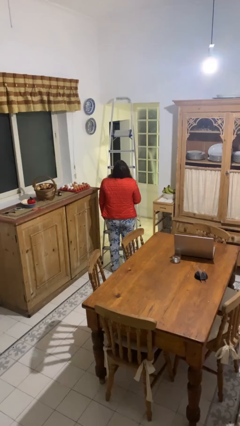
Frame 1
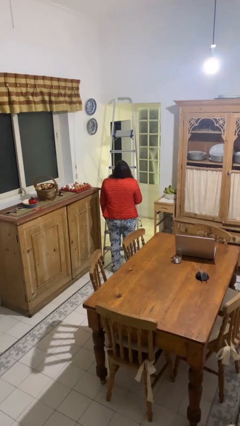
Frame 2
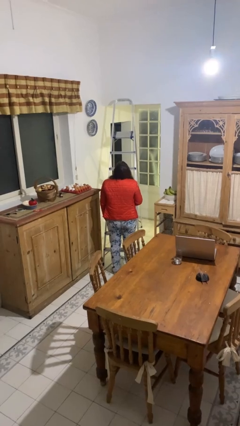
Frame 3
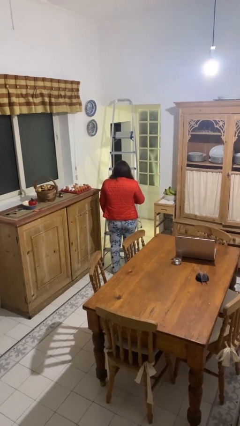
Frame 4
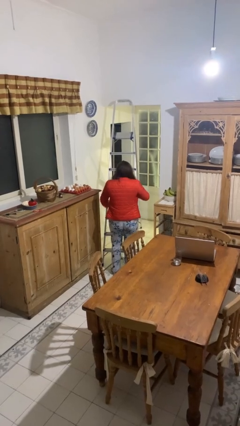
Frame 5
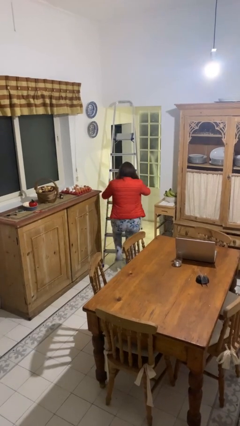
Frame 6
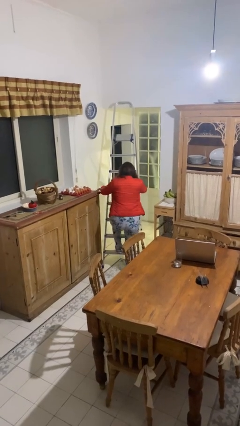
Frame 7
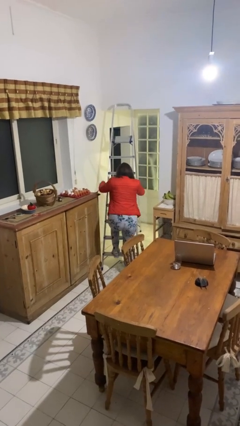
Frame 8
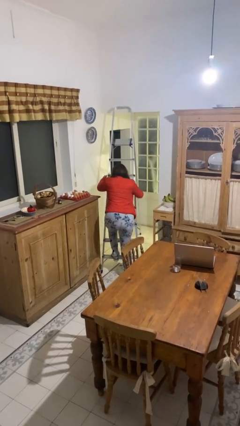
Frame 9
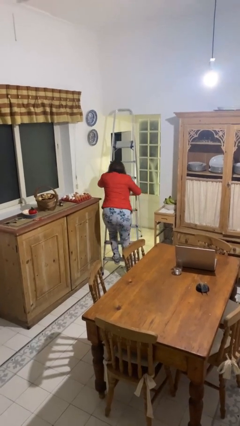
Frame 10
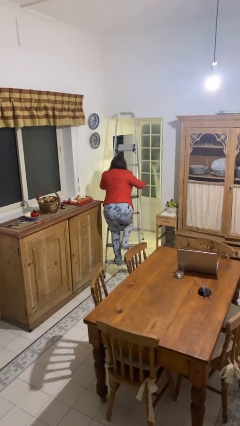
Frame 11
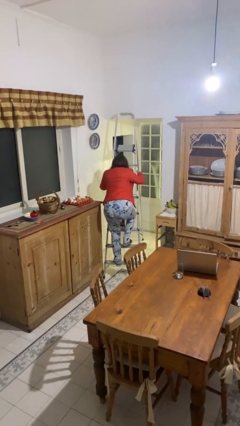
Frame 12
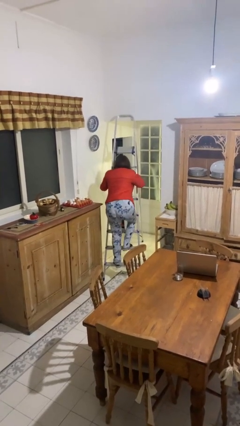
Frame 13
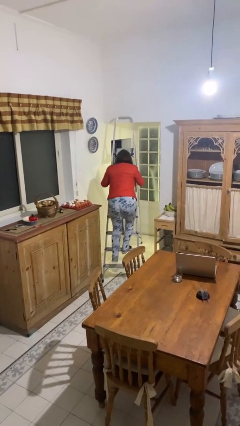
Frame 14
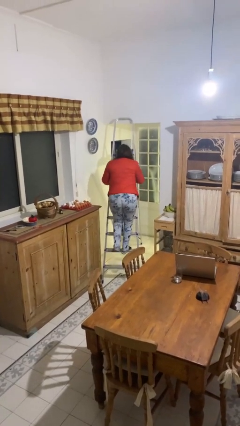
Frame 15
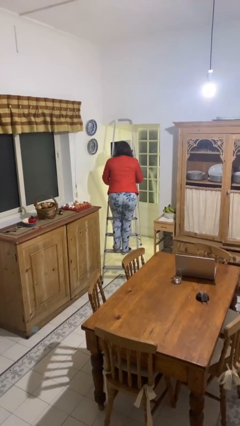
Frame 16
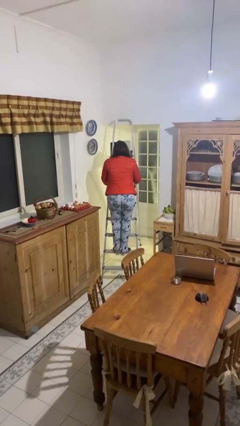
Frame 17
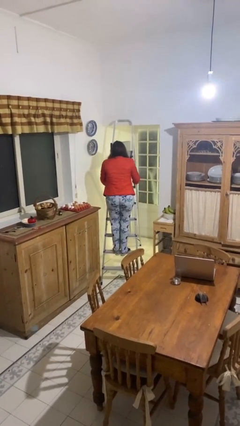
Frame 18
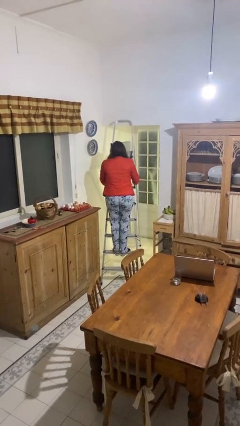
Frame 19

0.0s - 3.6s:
person climbs up ladder

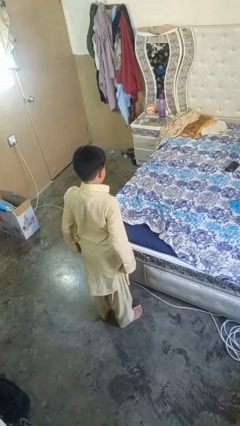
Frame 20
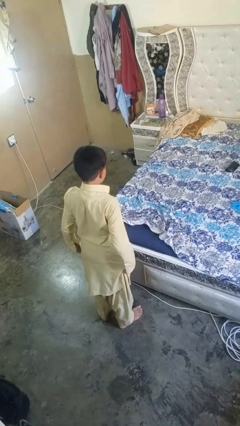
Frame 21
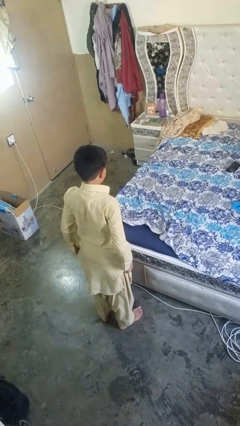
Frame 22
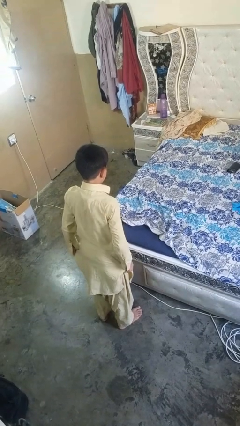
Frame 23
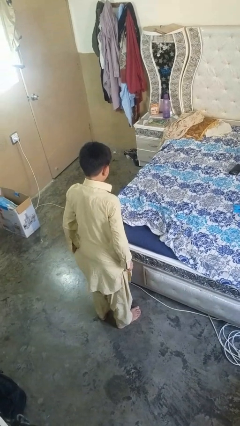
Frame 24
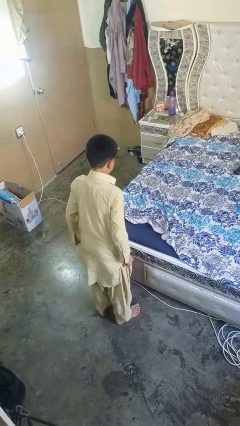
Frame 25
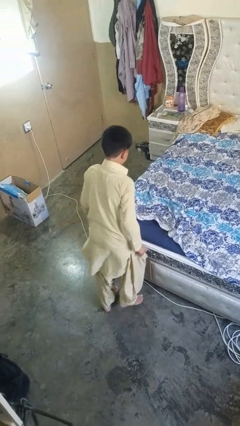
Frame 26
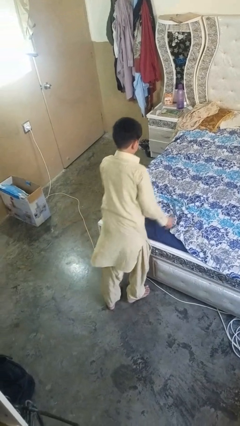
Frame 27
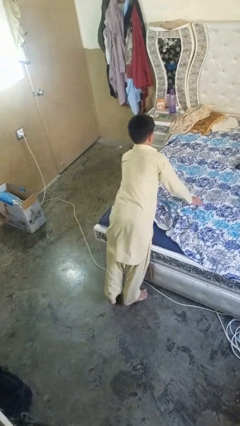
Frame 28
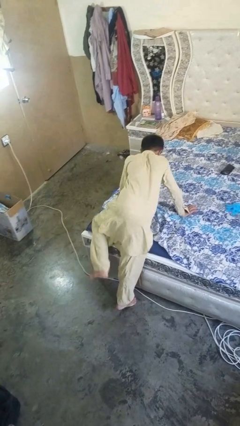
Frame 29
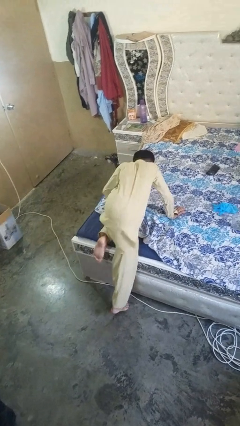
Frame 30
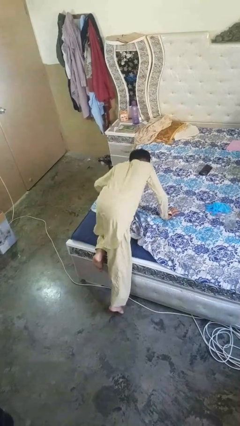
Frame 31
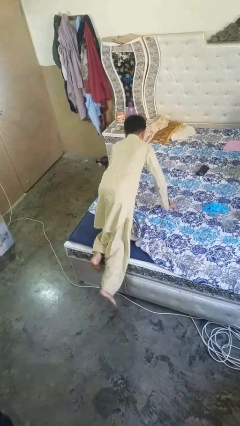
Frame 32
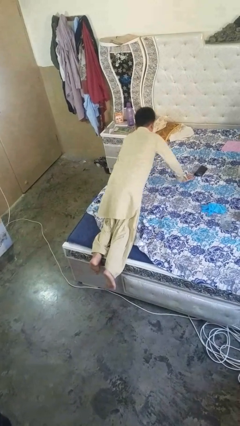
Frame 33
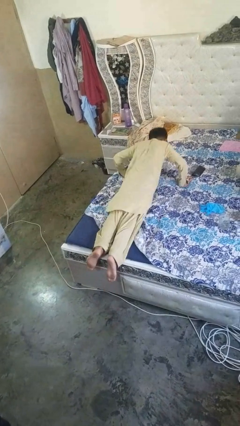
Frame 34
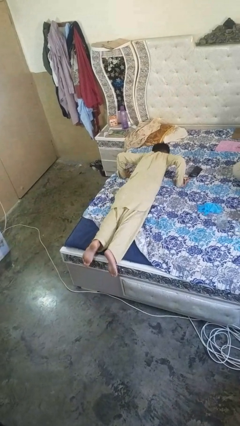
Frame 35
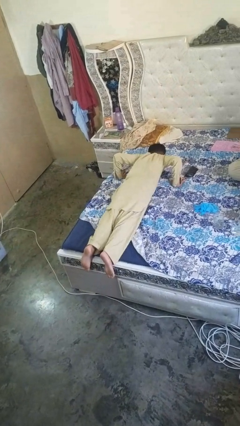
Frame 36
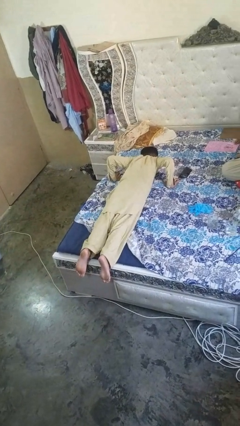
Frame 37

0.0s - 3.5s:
person lies down on bed

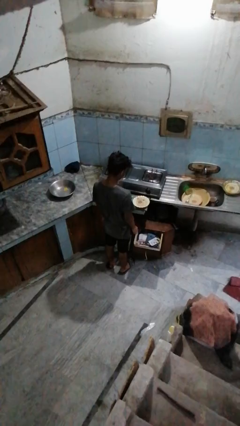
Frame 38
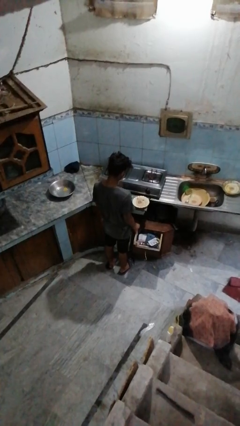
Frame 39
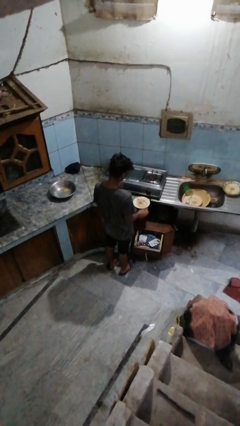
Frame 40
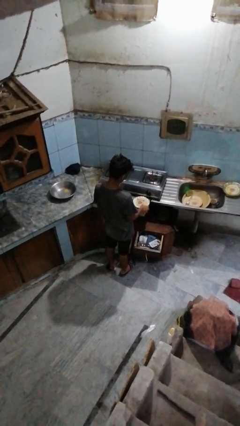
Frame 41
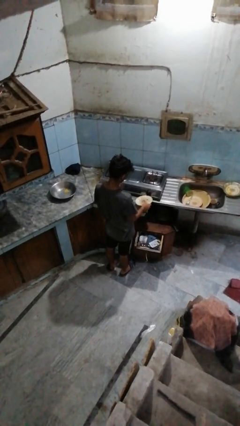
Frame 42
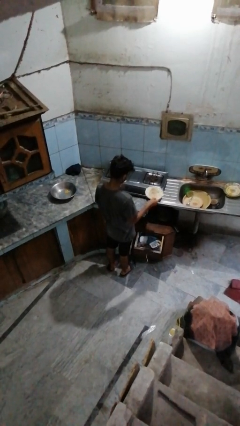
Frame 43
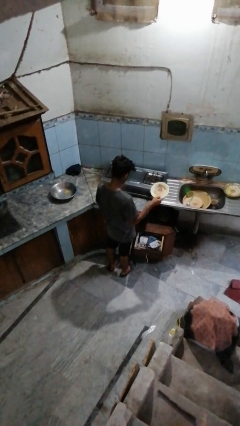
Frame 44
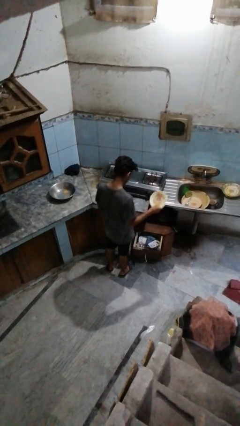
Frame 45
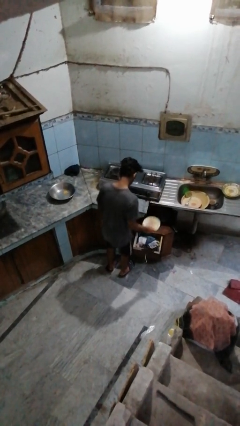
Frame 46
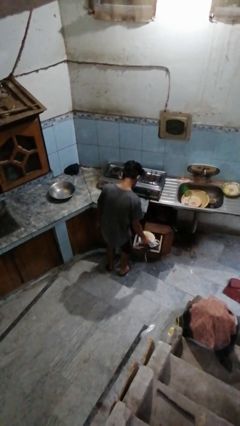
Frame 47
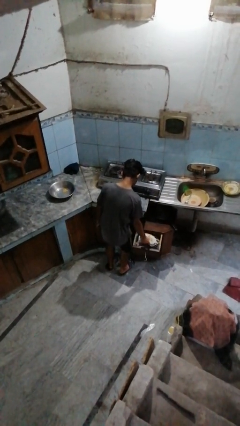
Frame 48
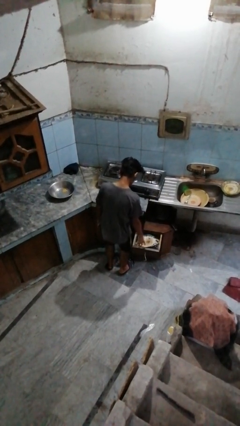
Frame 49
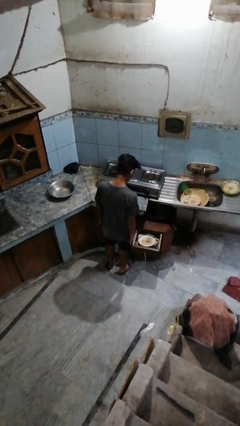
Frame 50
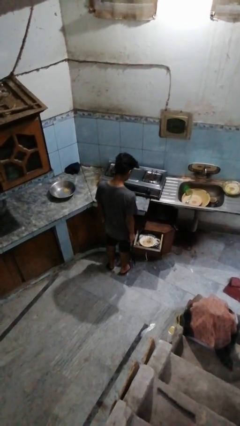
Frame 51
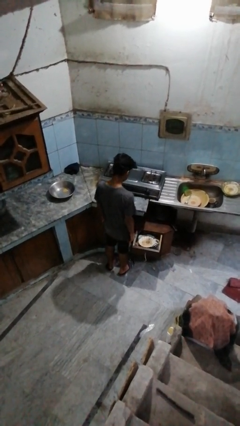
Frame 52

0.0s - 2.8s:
person puts object into kitchen drawer

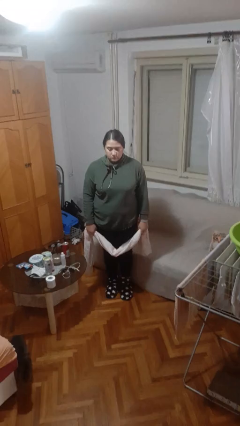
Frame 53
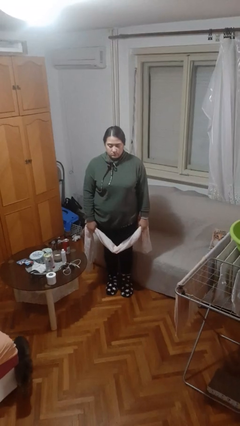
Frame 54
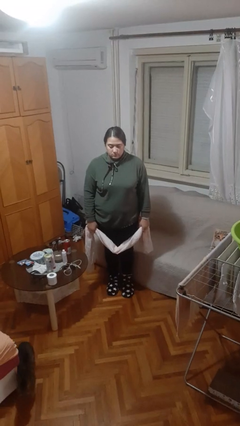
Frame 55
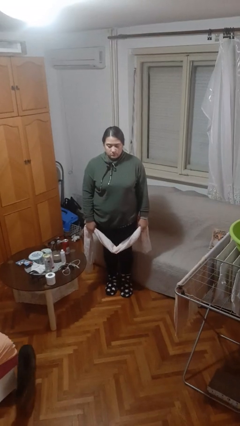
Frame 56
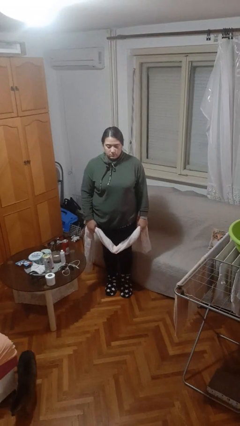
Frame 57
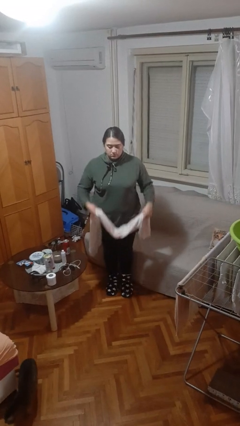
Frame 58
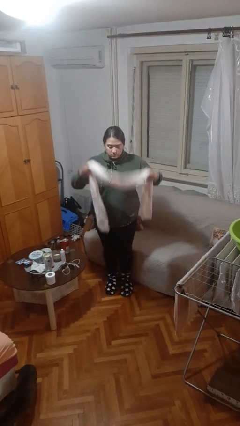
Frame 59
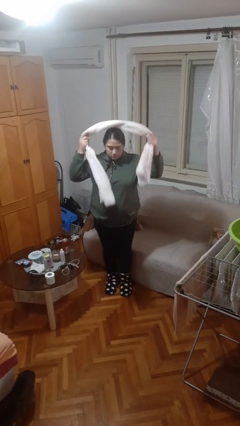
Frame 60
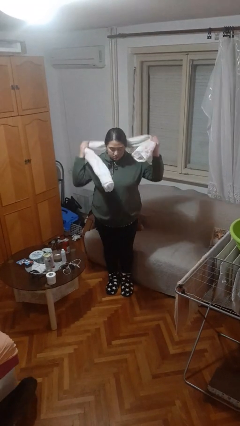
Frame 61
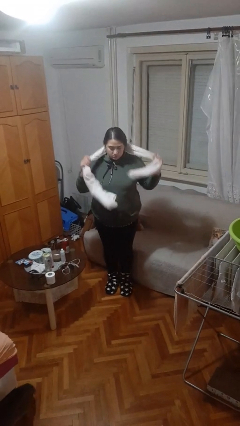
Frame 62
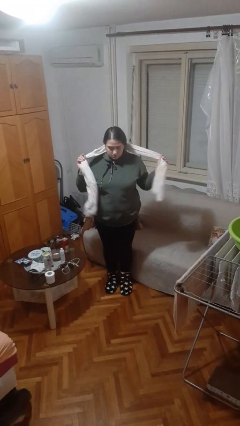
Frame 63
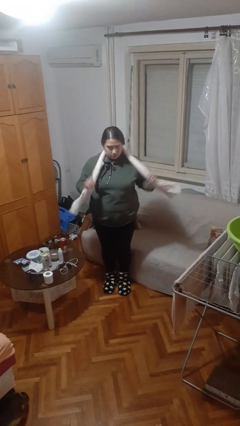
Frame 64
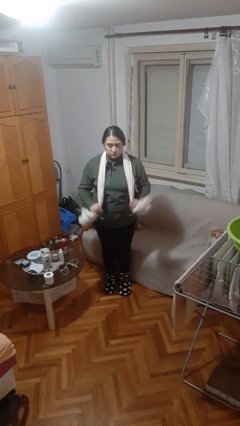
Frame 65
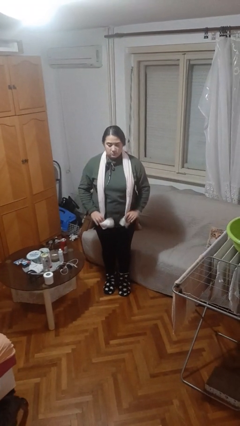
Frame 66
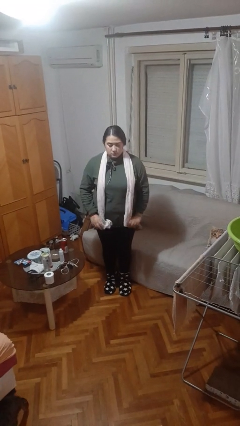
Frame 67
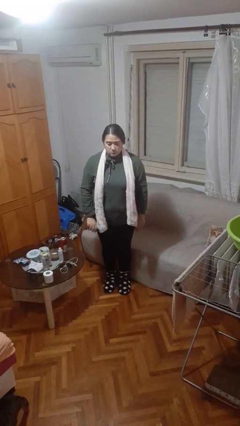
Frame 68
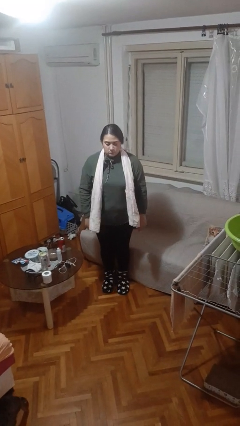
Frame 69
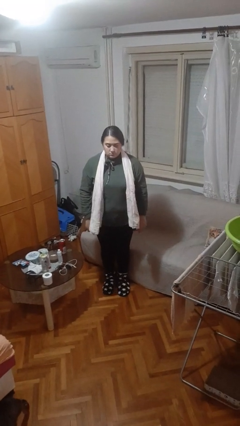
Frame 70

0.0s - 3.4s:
person puts on scarf

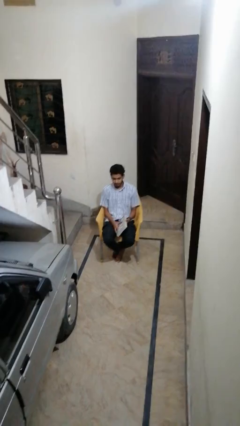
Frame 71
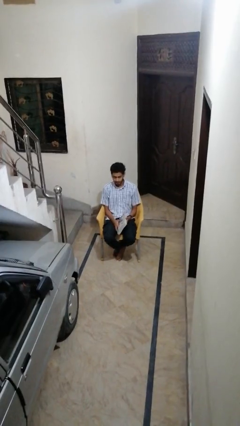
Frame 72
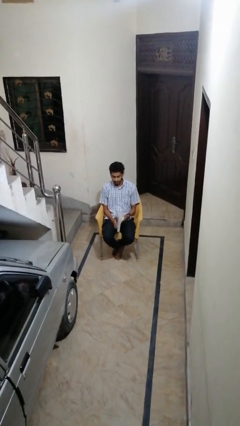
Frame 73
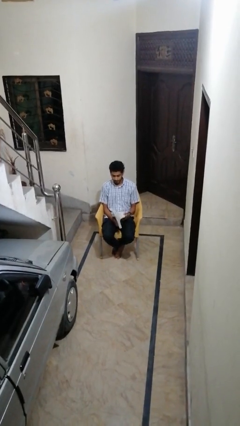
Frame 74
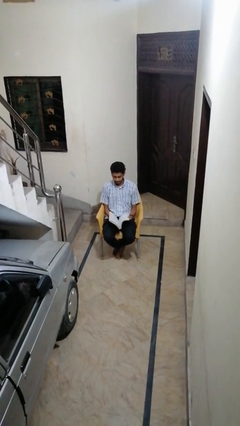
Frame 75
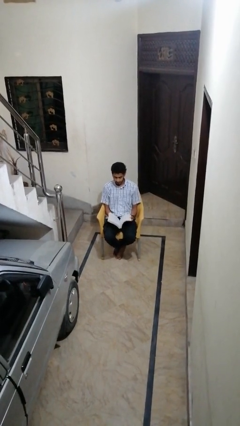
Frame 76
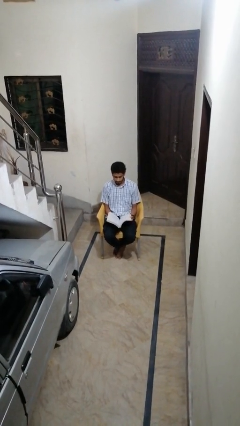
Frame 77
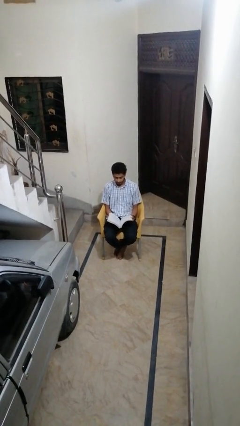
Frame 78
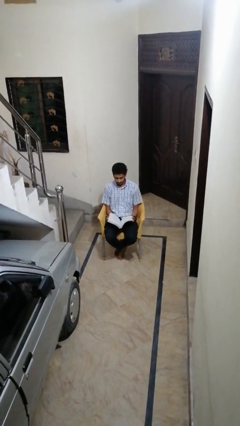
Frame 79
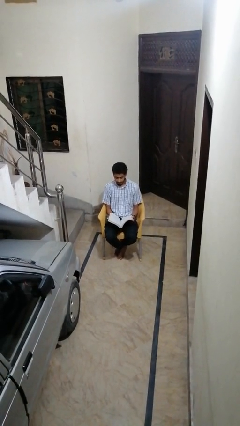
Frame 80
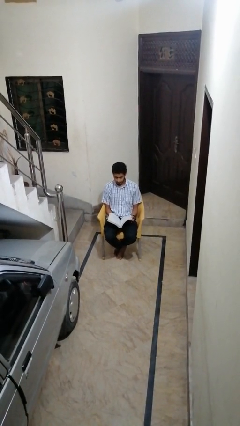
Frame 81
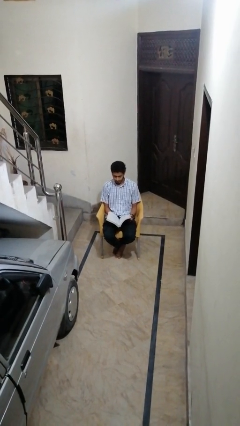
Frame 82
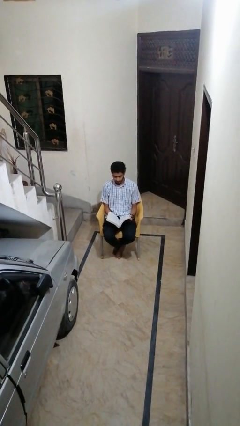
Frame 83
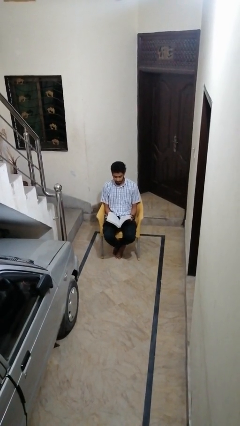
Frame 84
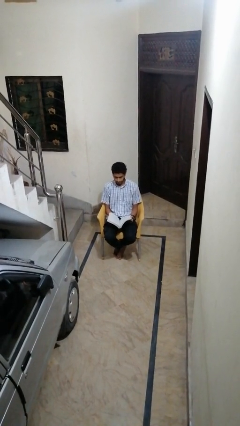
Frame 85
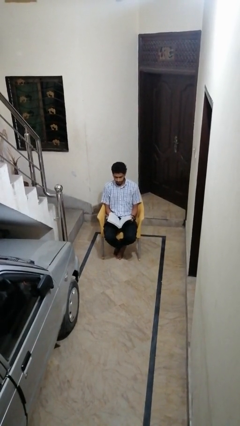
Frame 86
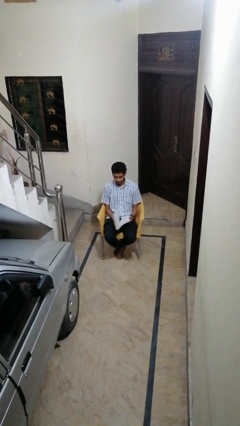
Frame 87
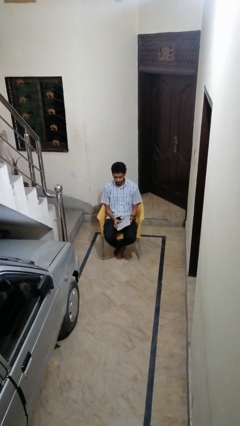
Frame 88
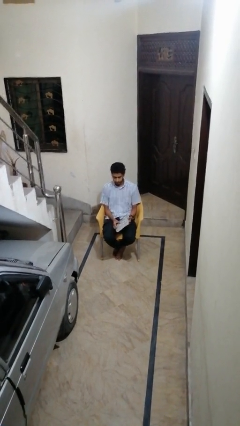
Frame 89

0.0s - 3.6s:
person reads book

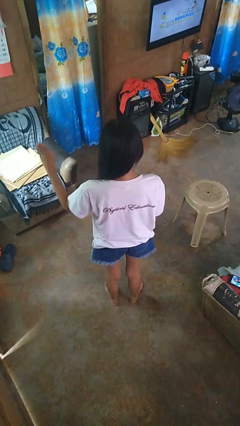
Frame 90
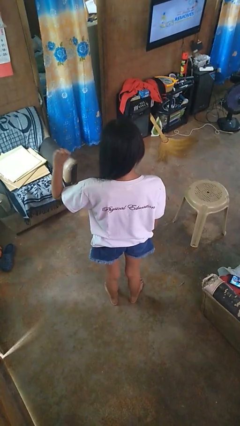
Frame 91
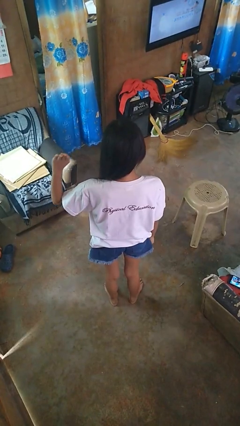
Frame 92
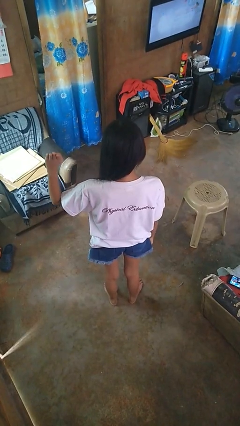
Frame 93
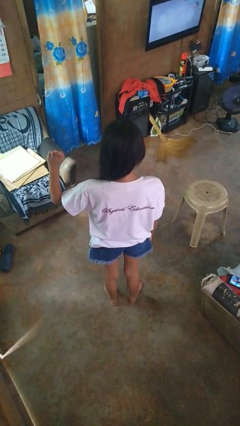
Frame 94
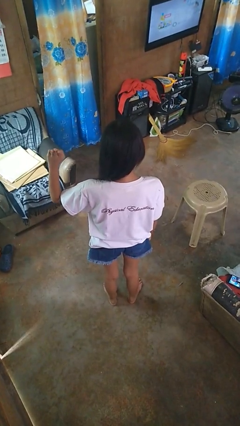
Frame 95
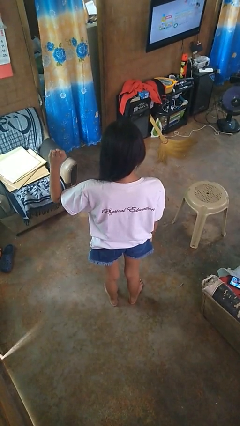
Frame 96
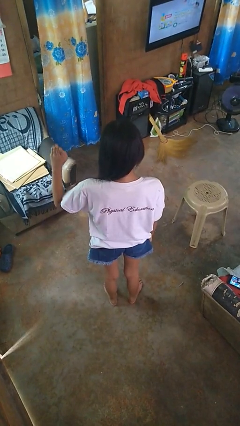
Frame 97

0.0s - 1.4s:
person gestures number four
